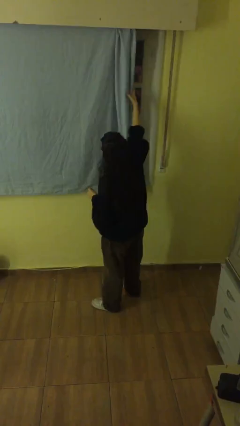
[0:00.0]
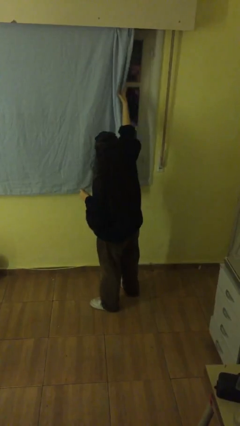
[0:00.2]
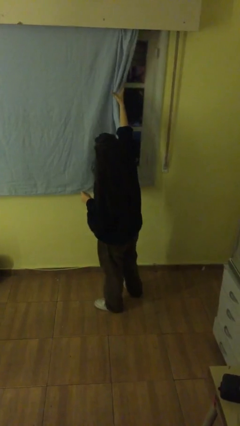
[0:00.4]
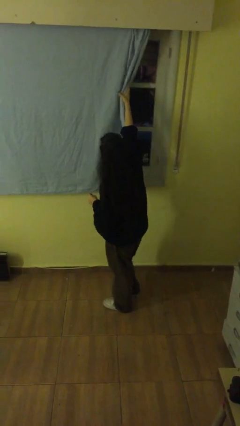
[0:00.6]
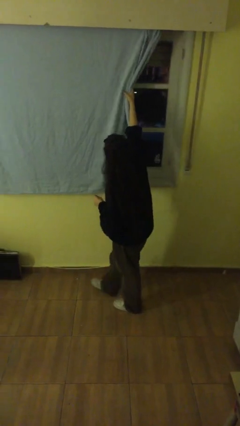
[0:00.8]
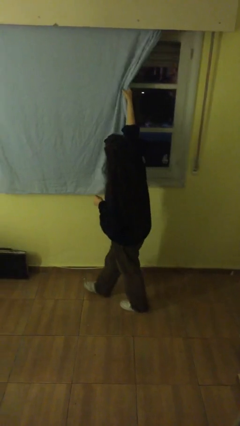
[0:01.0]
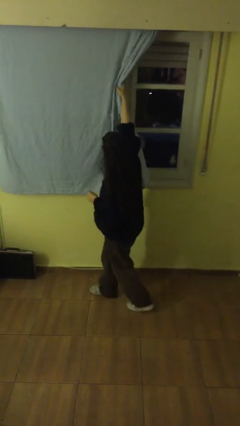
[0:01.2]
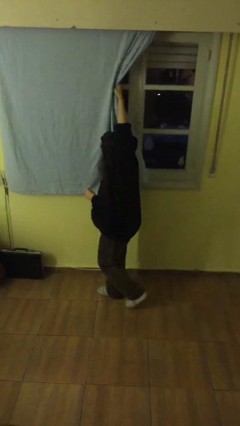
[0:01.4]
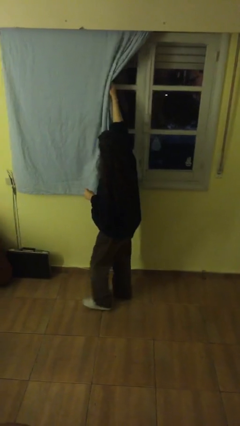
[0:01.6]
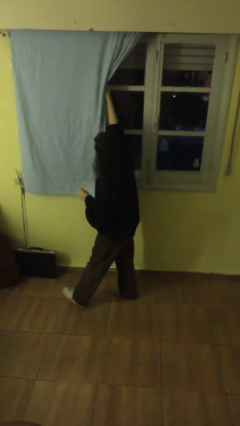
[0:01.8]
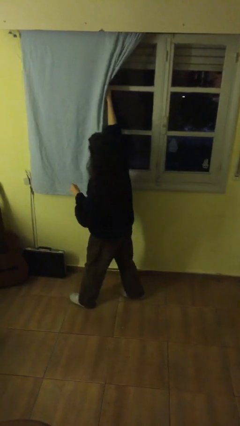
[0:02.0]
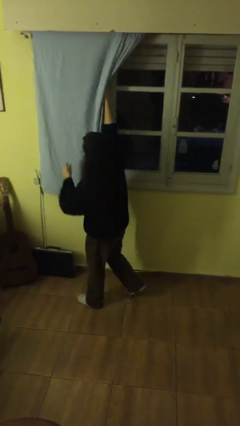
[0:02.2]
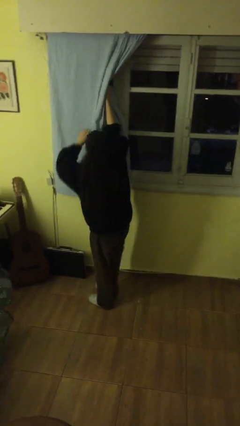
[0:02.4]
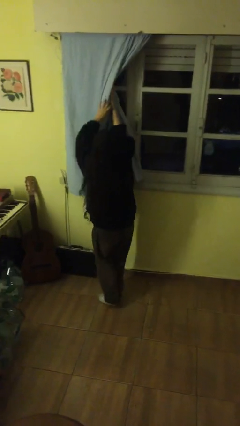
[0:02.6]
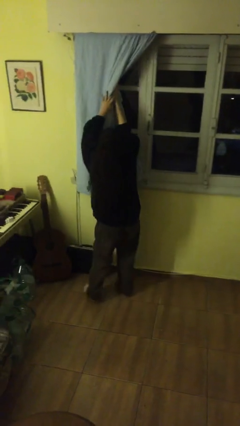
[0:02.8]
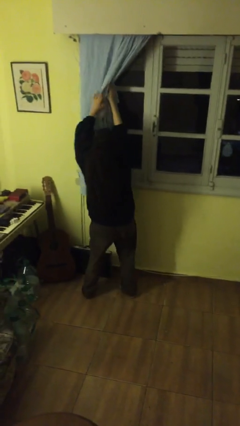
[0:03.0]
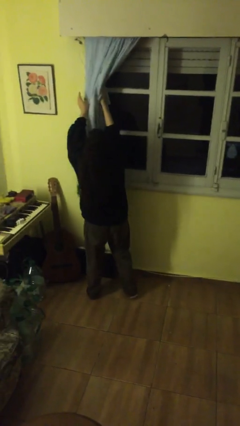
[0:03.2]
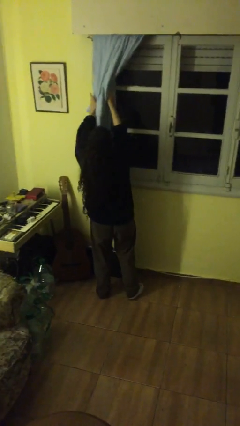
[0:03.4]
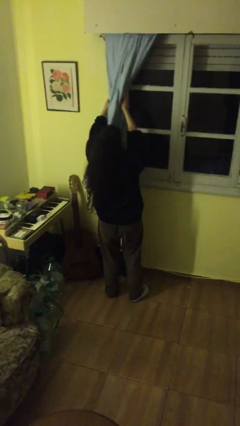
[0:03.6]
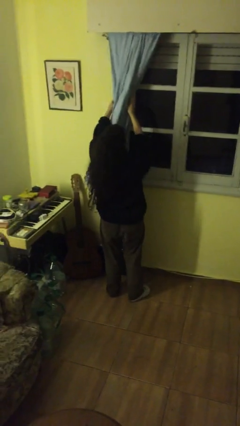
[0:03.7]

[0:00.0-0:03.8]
person opens curtains

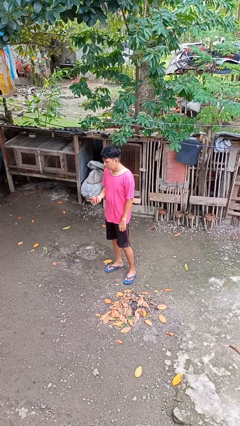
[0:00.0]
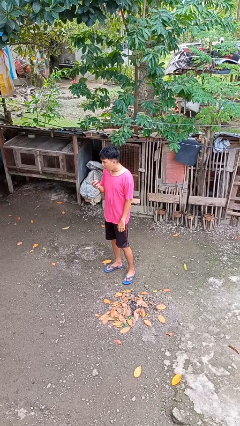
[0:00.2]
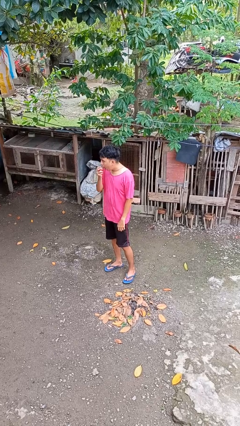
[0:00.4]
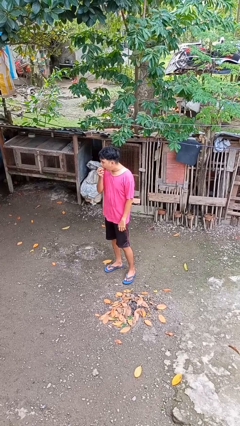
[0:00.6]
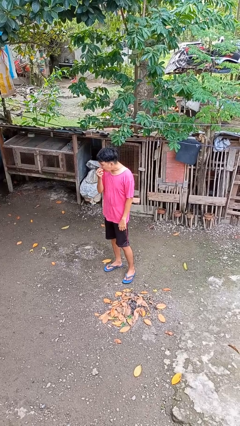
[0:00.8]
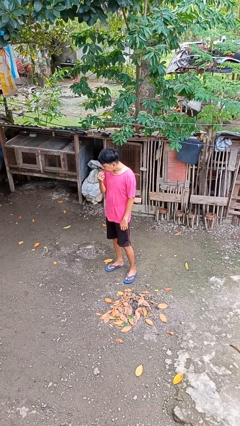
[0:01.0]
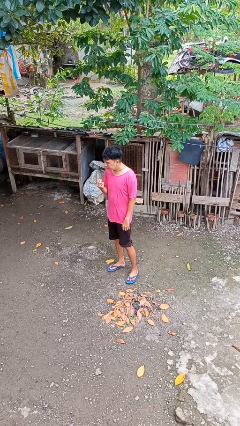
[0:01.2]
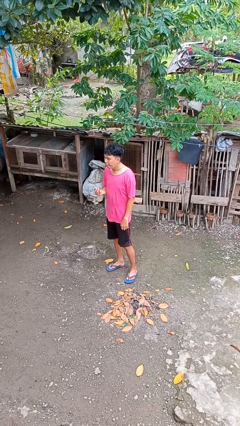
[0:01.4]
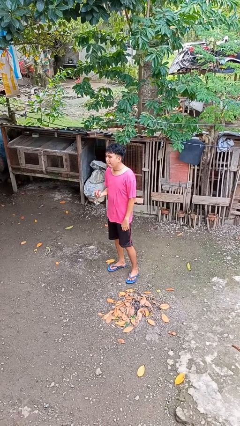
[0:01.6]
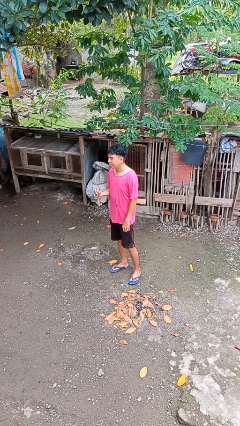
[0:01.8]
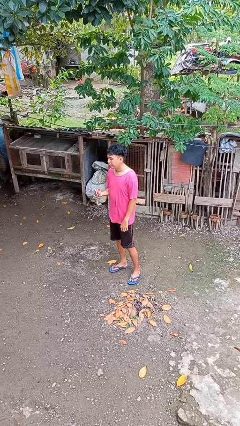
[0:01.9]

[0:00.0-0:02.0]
person eats apple

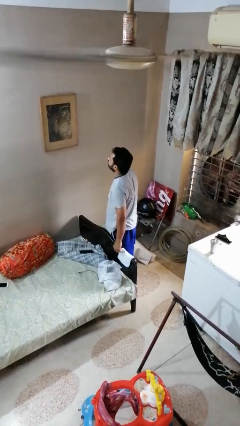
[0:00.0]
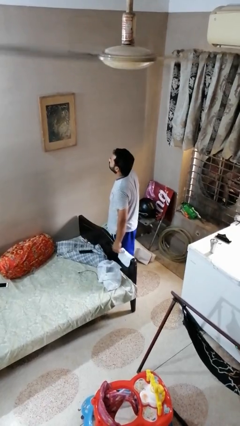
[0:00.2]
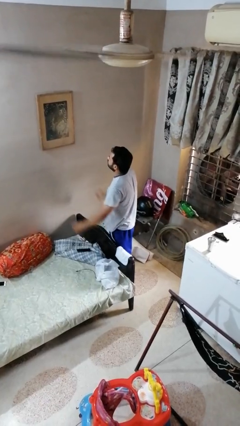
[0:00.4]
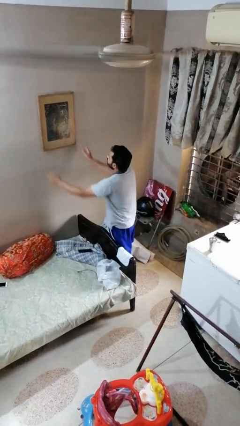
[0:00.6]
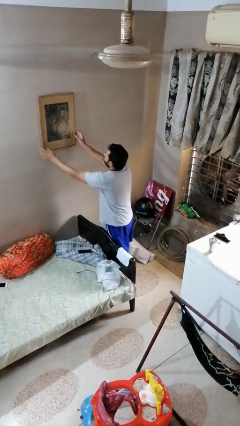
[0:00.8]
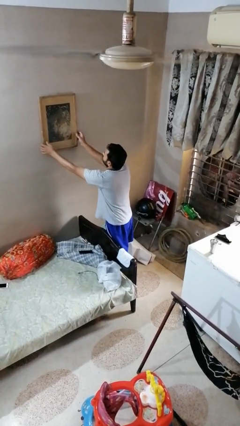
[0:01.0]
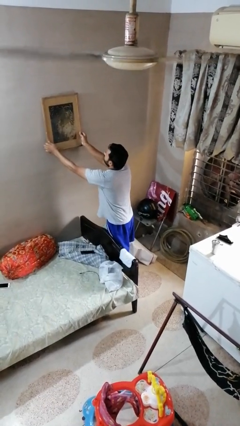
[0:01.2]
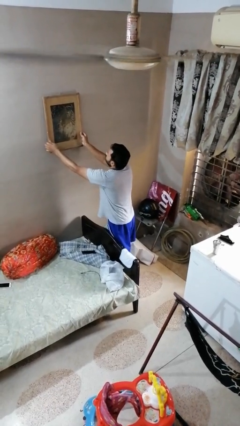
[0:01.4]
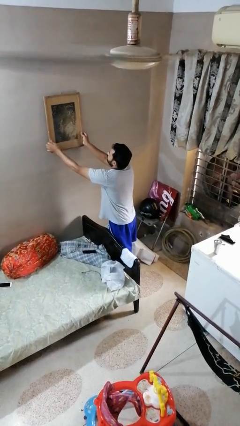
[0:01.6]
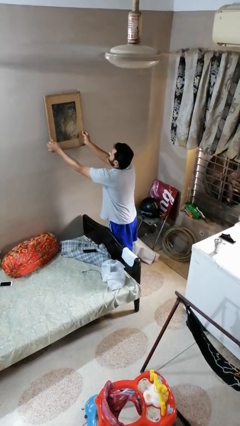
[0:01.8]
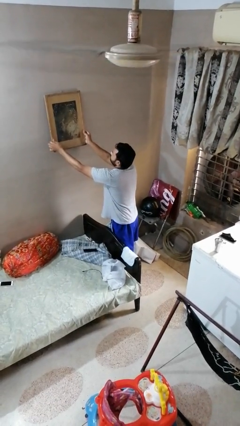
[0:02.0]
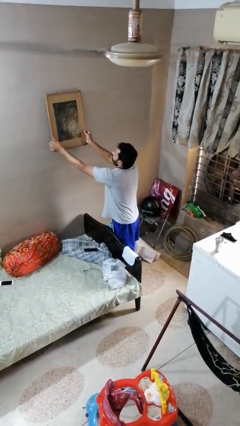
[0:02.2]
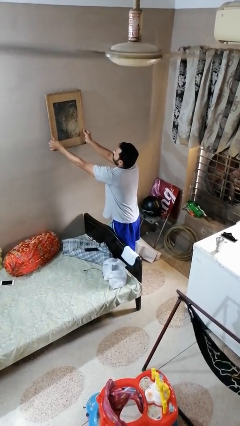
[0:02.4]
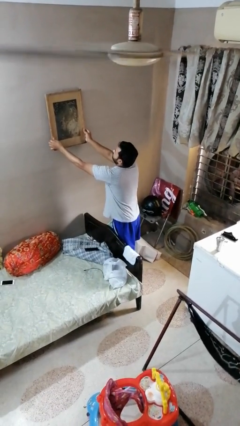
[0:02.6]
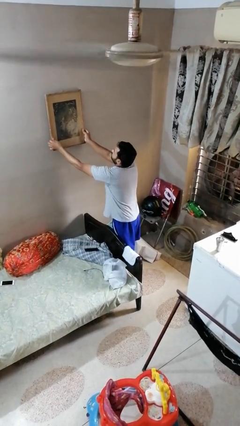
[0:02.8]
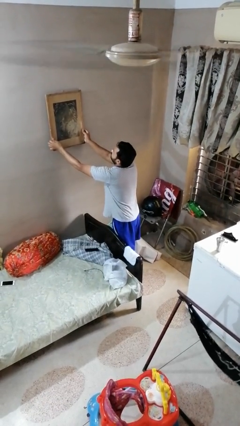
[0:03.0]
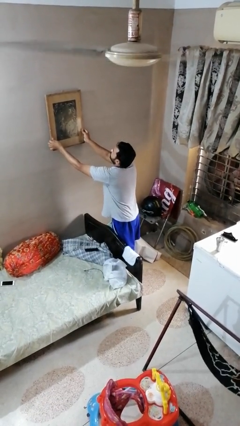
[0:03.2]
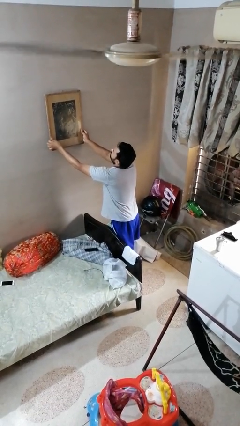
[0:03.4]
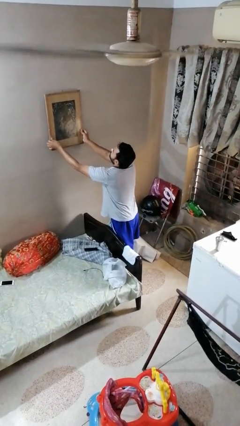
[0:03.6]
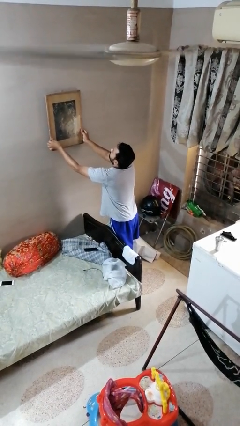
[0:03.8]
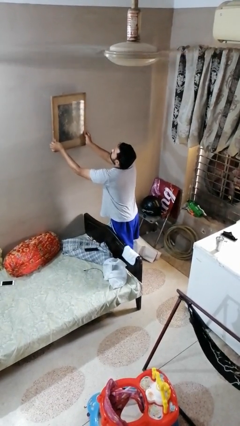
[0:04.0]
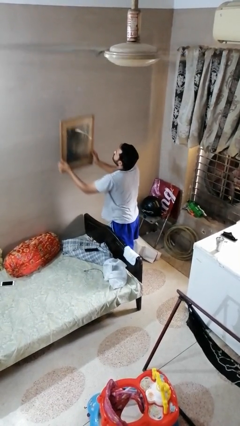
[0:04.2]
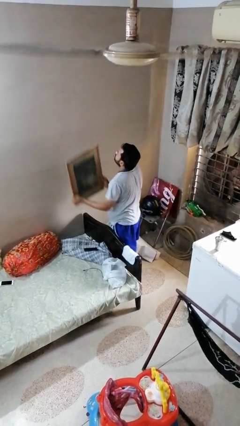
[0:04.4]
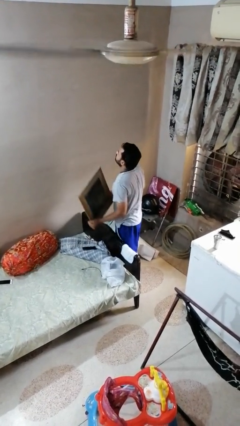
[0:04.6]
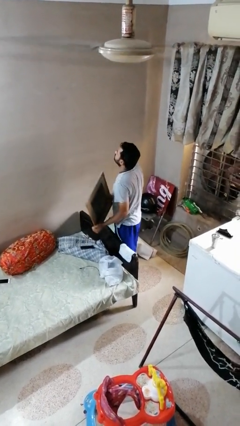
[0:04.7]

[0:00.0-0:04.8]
person takes down picture frame

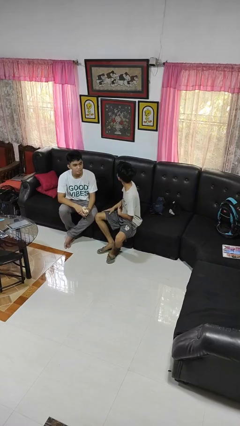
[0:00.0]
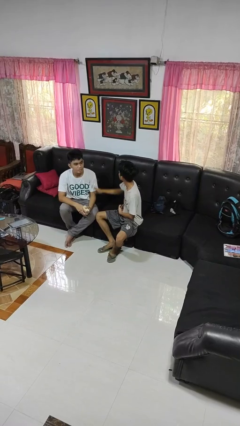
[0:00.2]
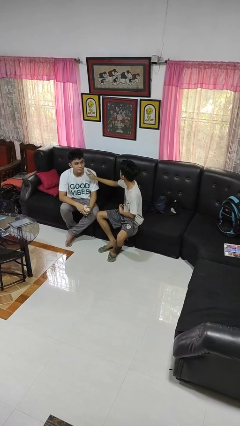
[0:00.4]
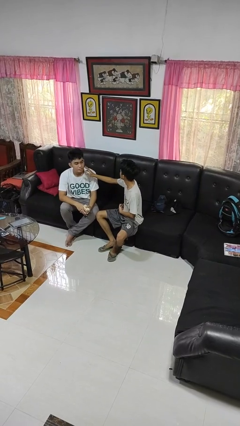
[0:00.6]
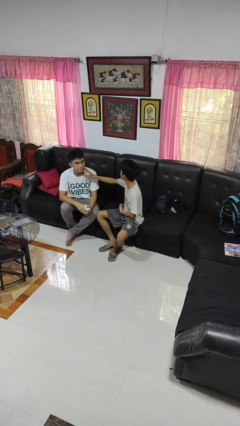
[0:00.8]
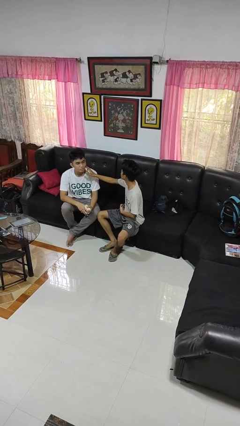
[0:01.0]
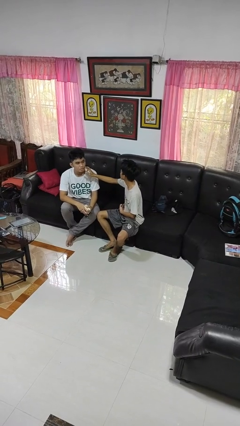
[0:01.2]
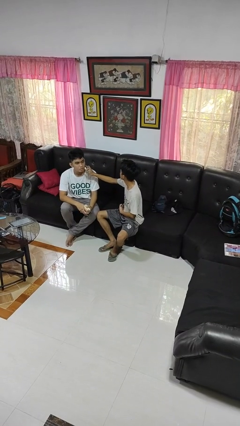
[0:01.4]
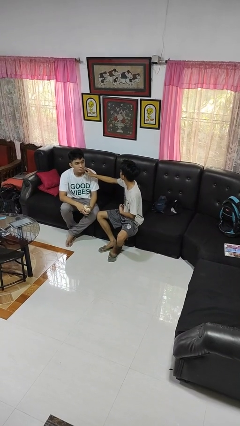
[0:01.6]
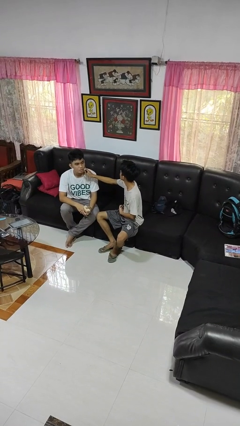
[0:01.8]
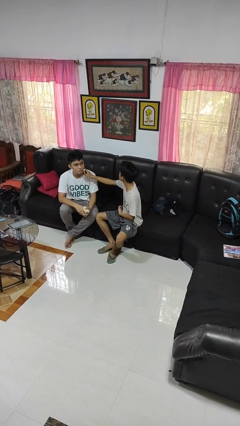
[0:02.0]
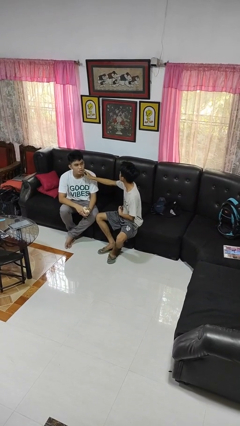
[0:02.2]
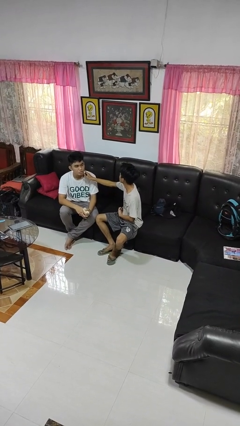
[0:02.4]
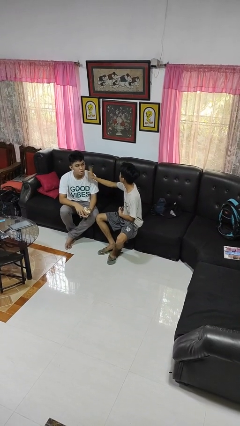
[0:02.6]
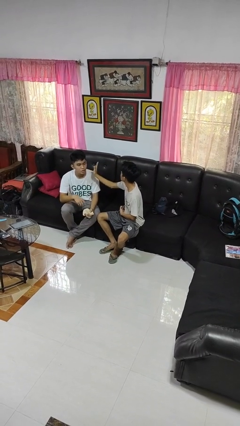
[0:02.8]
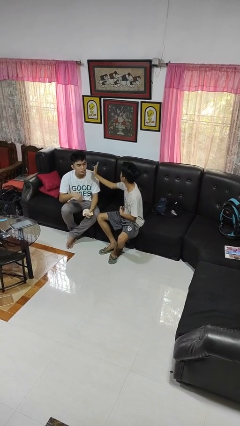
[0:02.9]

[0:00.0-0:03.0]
person touches face of person

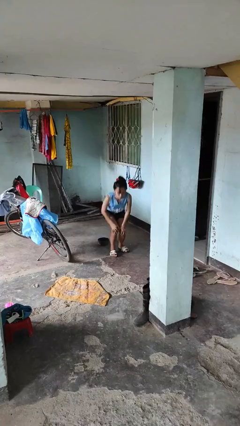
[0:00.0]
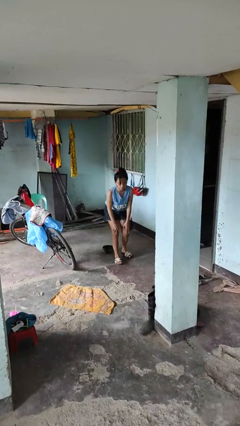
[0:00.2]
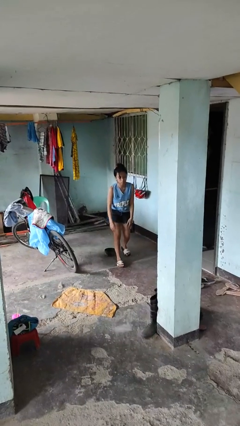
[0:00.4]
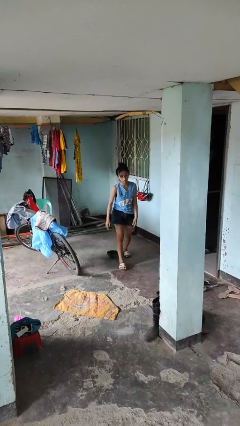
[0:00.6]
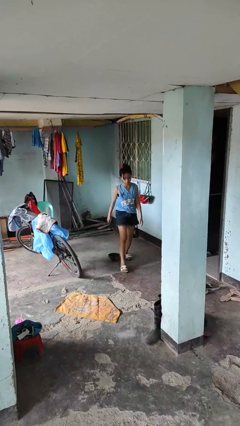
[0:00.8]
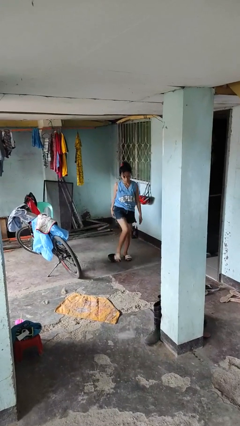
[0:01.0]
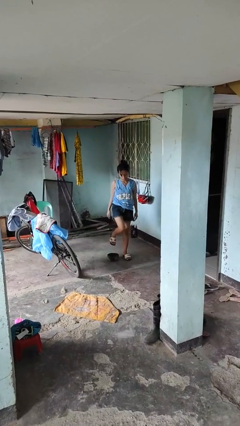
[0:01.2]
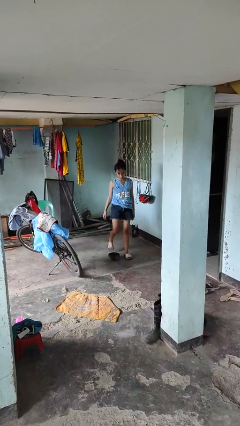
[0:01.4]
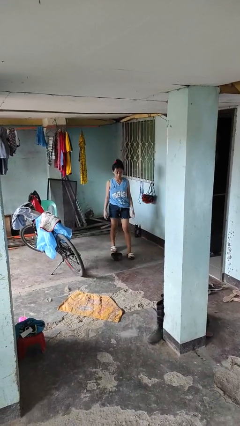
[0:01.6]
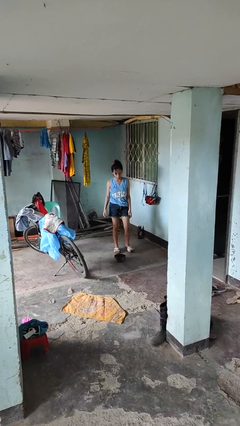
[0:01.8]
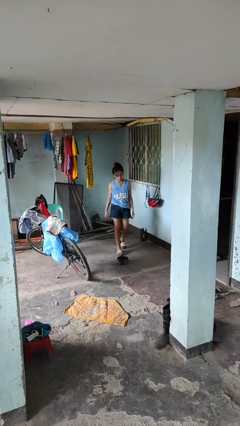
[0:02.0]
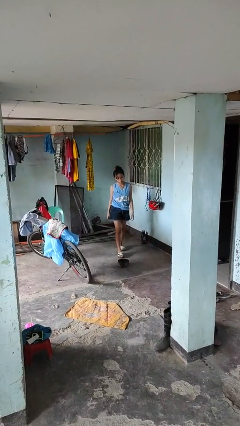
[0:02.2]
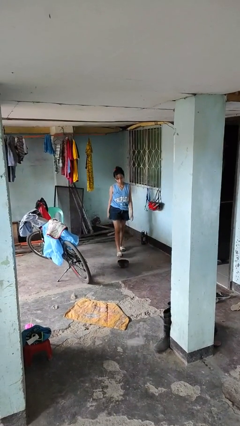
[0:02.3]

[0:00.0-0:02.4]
person stands up from floor

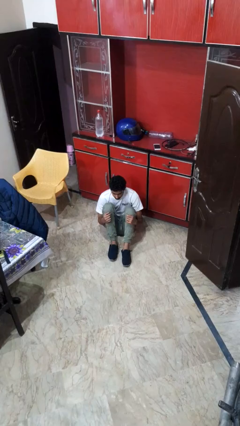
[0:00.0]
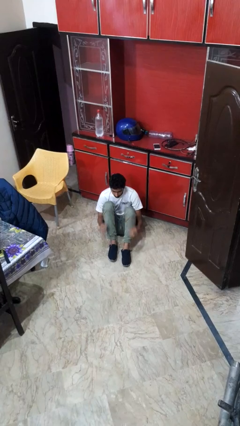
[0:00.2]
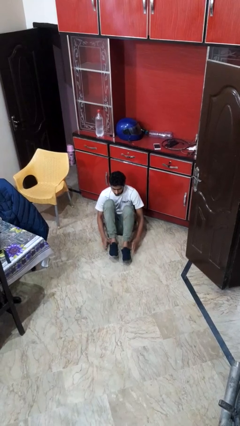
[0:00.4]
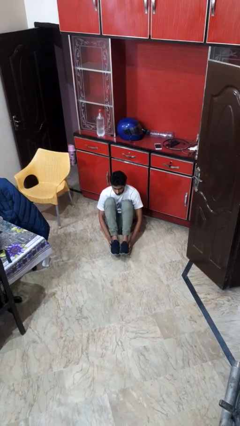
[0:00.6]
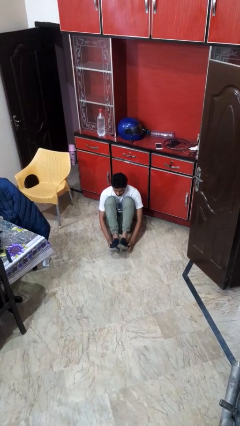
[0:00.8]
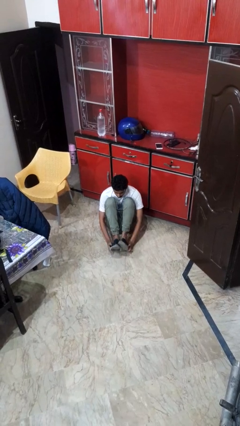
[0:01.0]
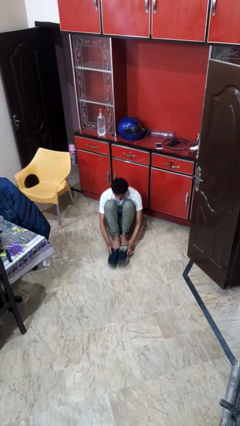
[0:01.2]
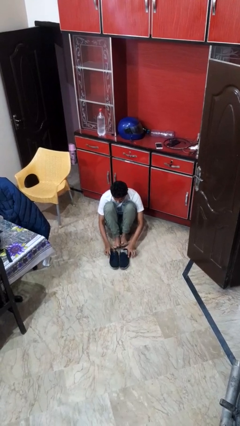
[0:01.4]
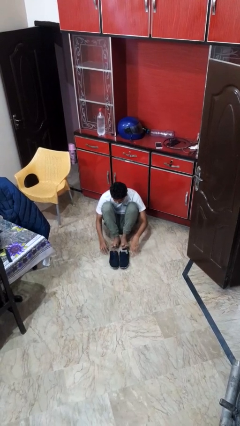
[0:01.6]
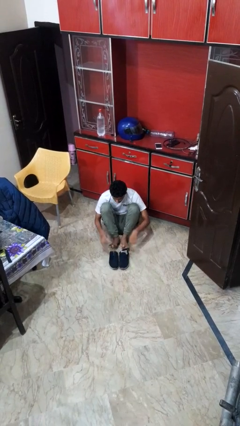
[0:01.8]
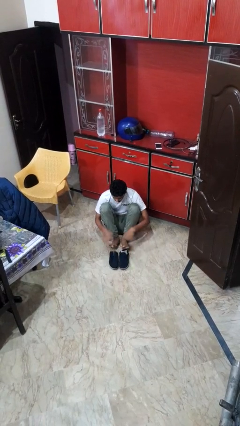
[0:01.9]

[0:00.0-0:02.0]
person takes off shoes
